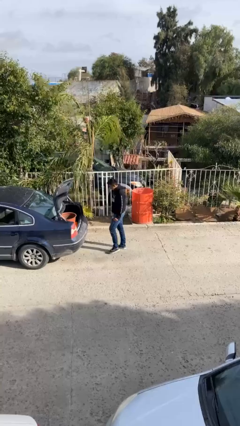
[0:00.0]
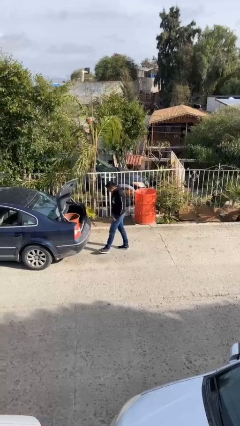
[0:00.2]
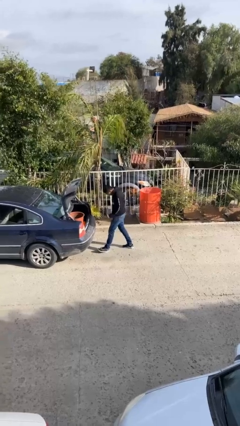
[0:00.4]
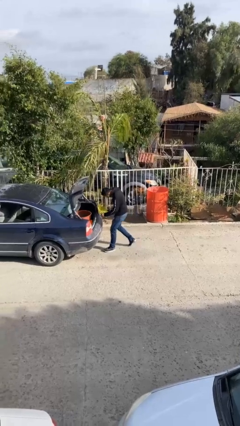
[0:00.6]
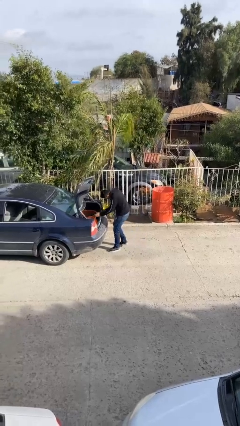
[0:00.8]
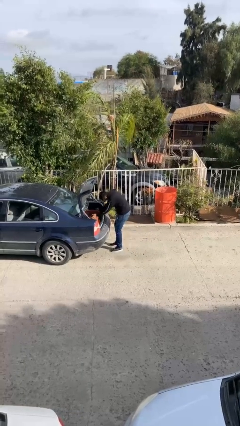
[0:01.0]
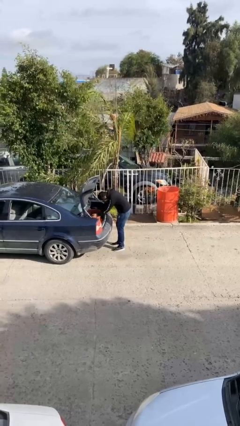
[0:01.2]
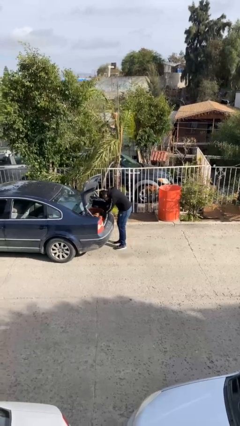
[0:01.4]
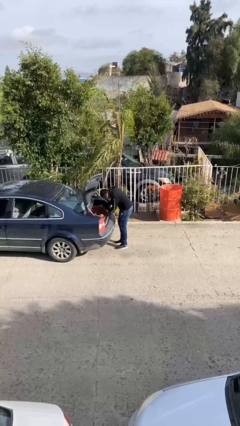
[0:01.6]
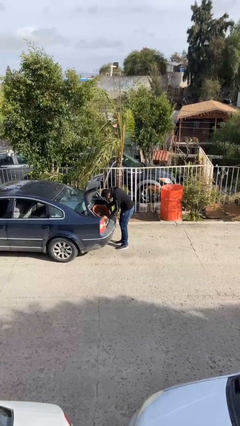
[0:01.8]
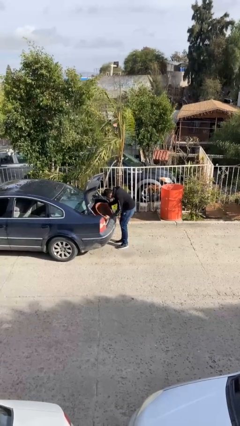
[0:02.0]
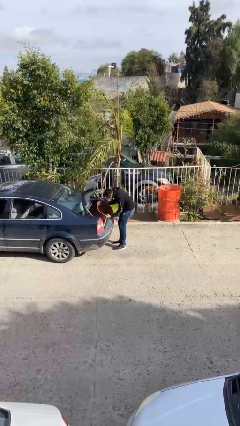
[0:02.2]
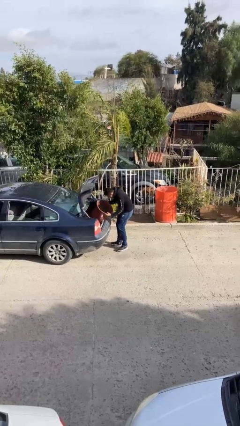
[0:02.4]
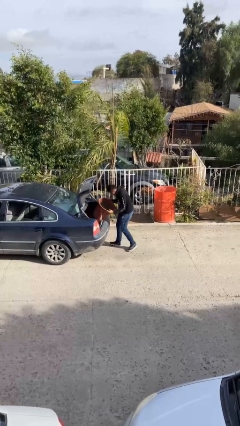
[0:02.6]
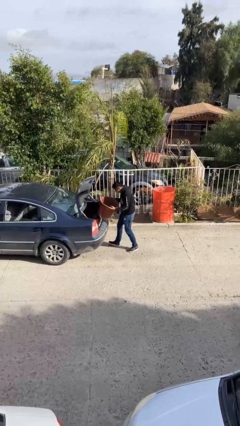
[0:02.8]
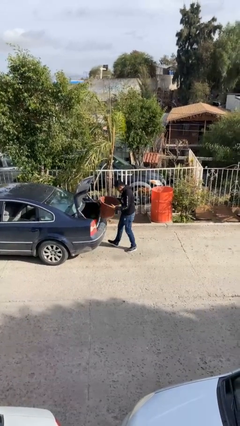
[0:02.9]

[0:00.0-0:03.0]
person unloads car

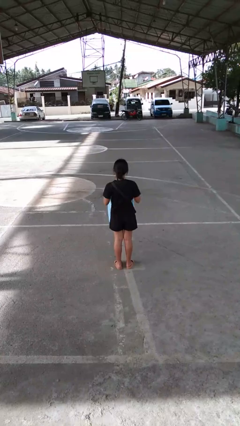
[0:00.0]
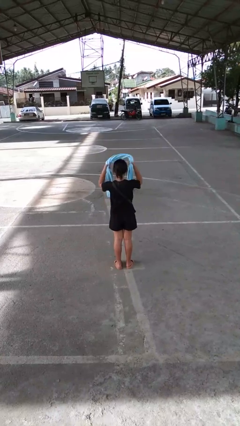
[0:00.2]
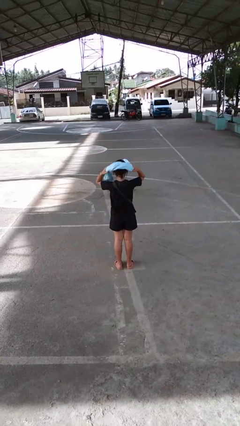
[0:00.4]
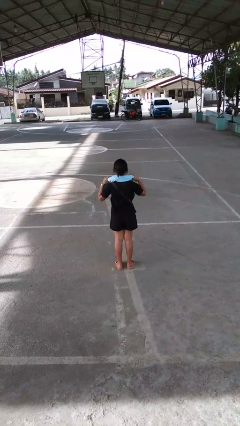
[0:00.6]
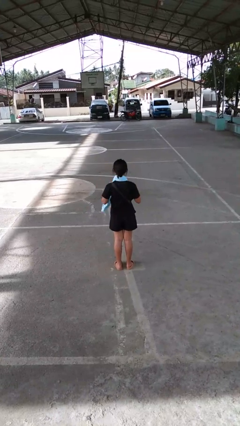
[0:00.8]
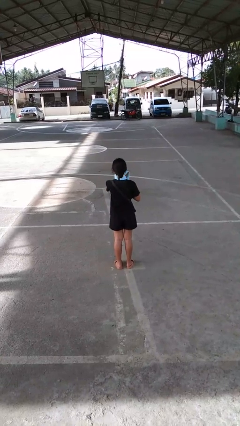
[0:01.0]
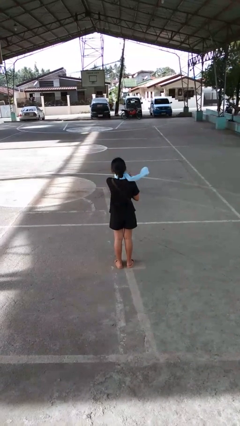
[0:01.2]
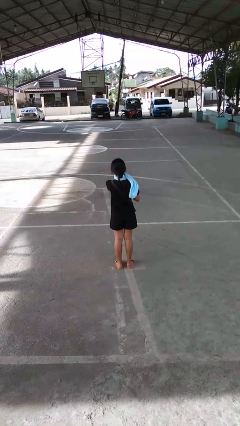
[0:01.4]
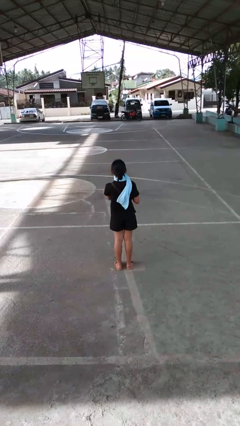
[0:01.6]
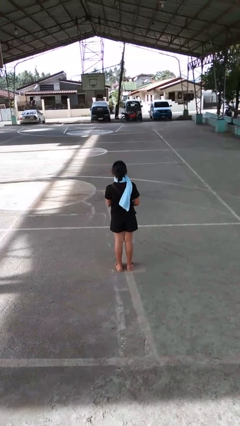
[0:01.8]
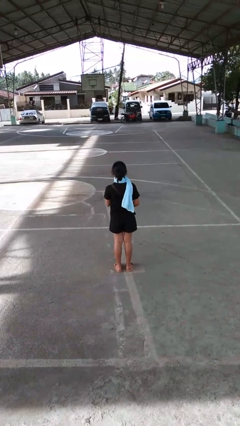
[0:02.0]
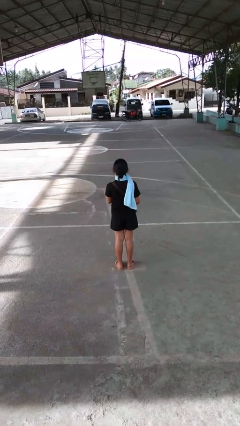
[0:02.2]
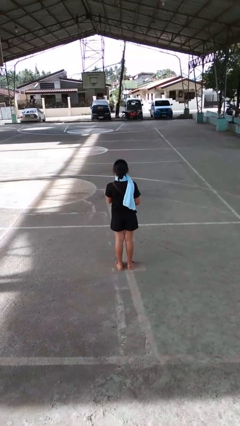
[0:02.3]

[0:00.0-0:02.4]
person puts on scarf

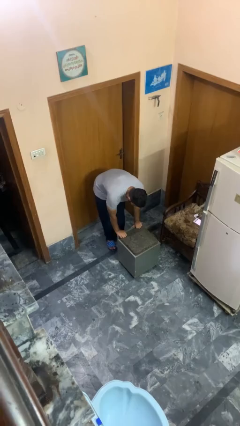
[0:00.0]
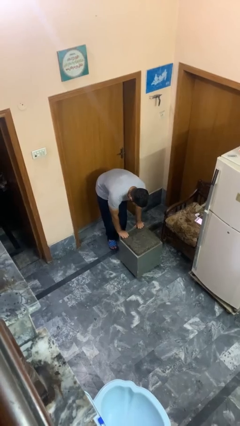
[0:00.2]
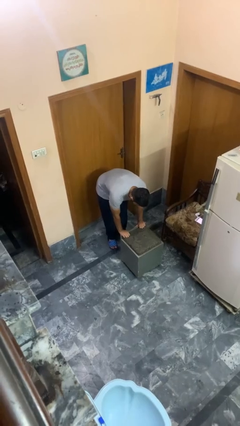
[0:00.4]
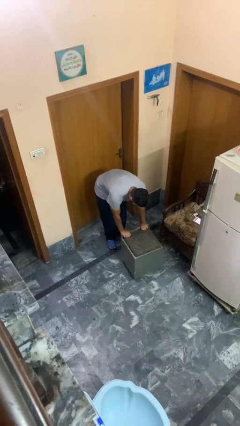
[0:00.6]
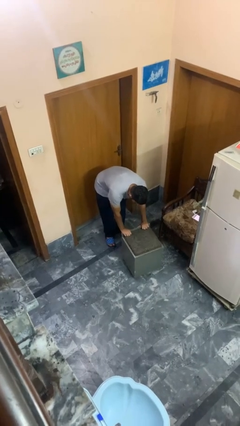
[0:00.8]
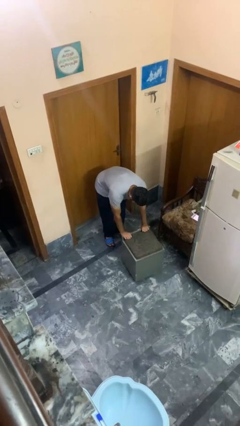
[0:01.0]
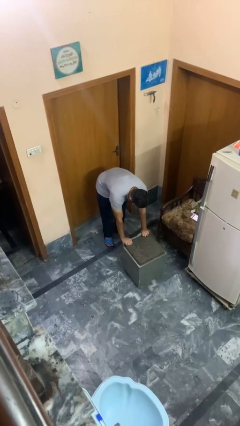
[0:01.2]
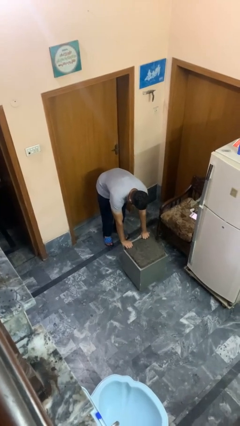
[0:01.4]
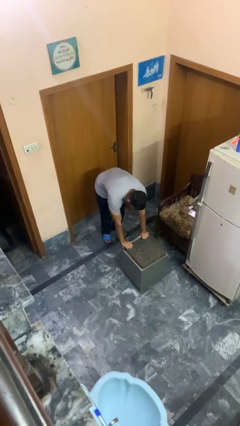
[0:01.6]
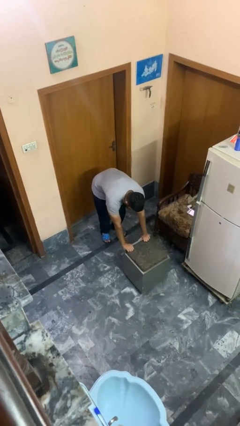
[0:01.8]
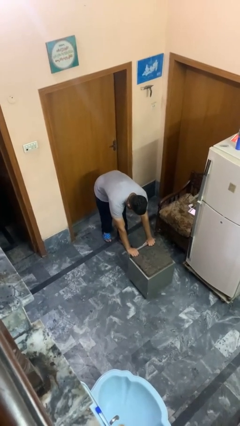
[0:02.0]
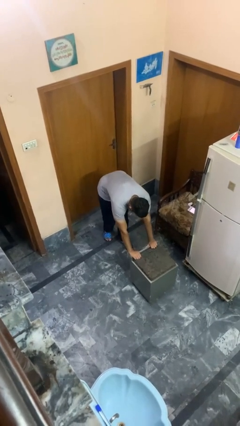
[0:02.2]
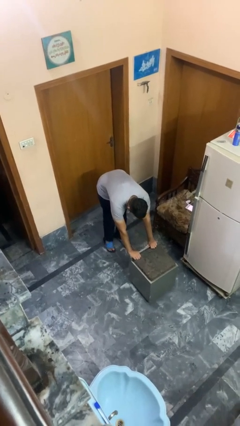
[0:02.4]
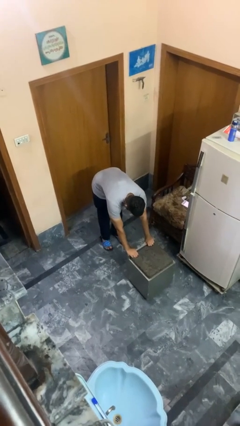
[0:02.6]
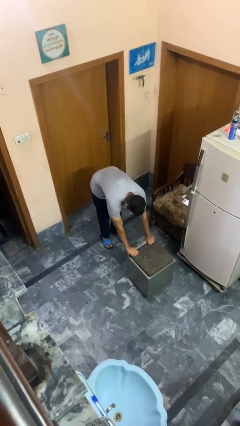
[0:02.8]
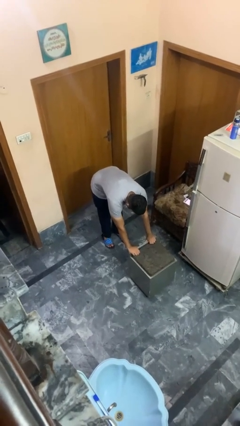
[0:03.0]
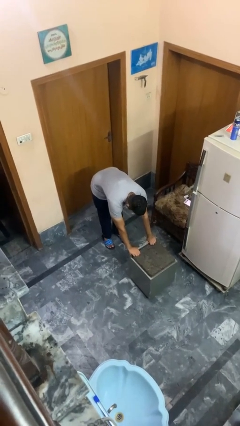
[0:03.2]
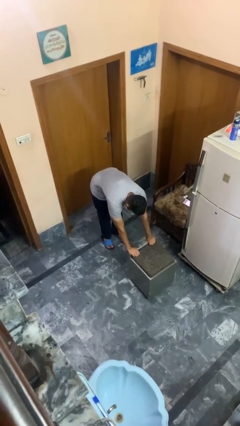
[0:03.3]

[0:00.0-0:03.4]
person pushes wheeled cart

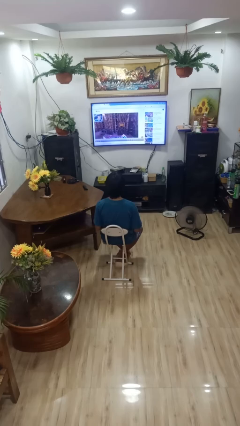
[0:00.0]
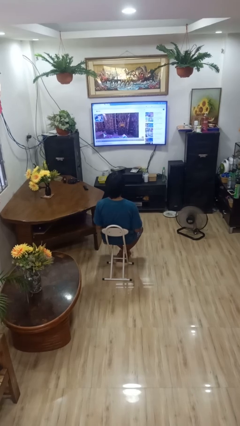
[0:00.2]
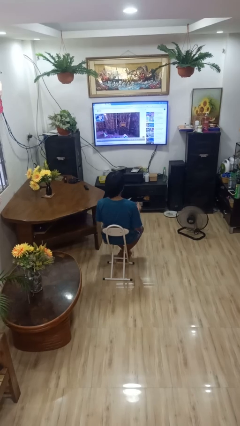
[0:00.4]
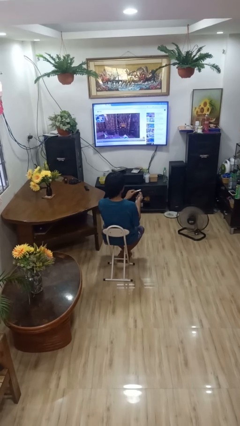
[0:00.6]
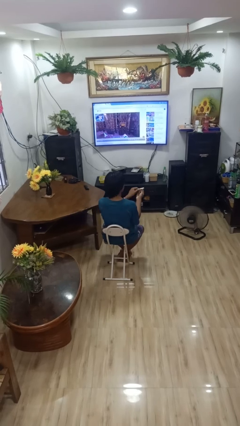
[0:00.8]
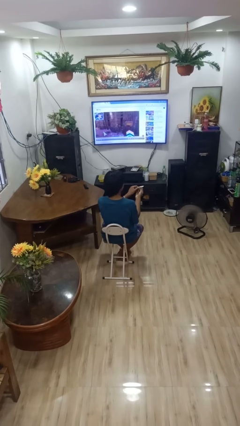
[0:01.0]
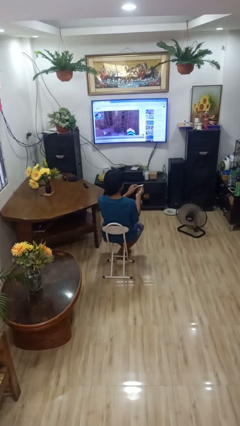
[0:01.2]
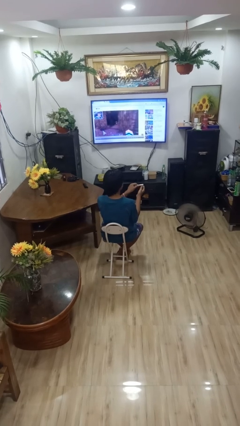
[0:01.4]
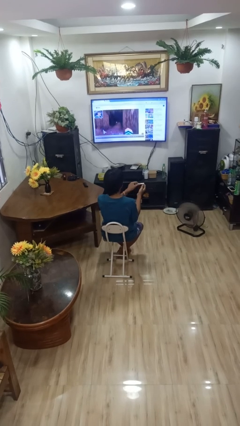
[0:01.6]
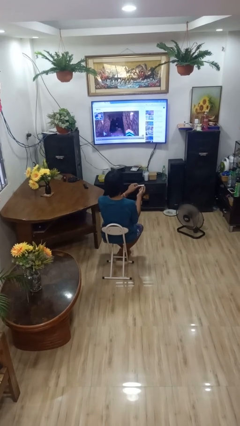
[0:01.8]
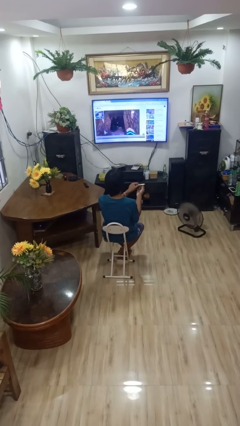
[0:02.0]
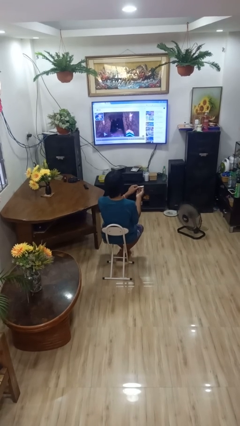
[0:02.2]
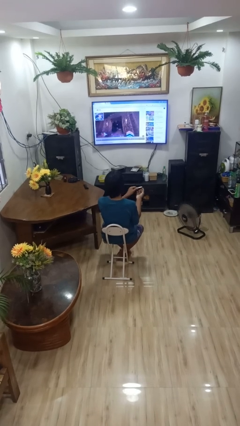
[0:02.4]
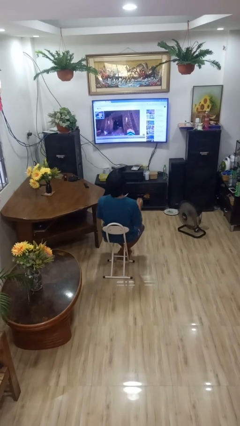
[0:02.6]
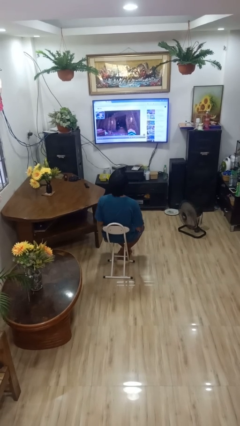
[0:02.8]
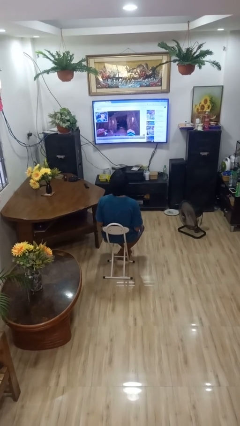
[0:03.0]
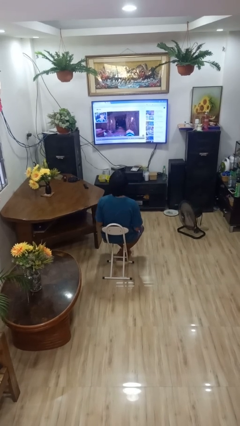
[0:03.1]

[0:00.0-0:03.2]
person files fingernails

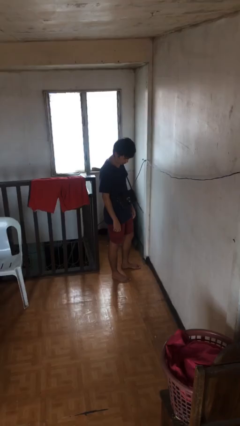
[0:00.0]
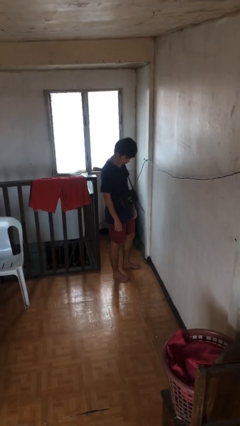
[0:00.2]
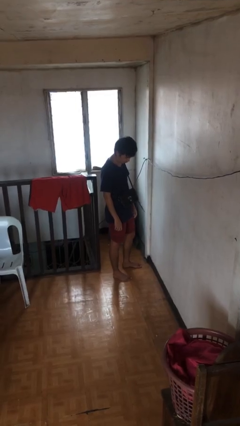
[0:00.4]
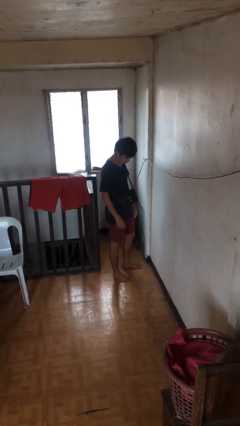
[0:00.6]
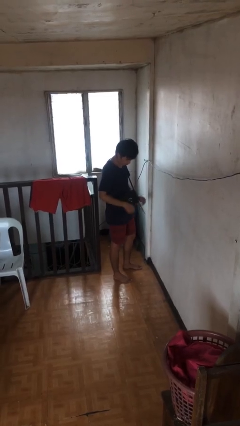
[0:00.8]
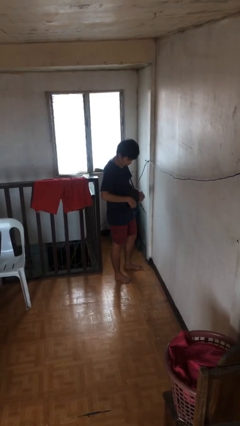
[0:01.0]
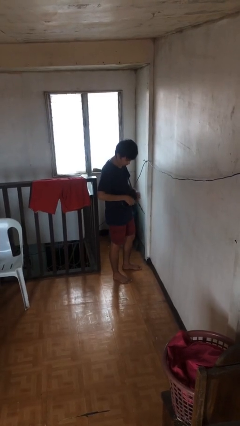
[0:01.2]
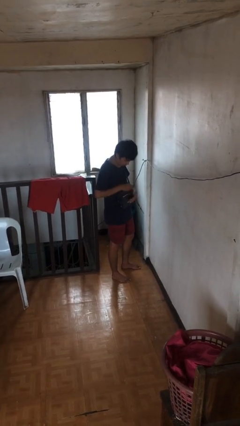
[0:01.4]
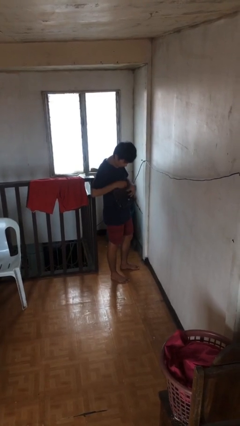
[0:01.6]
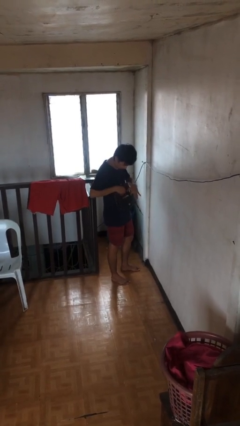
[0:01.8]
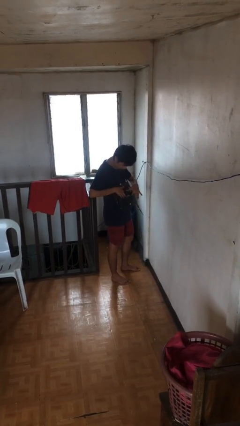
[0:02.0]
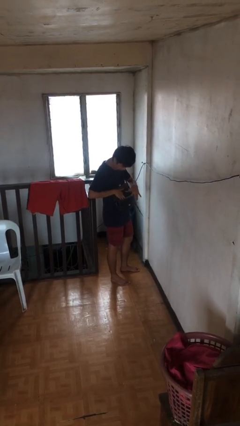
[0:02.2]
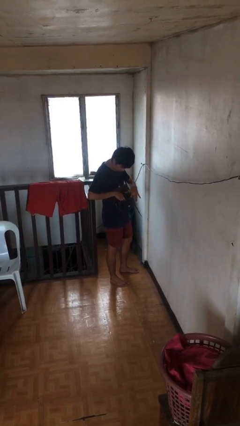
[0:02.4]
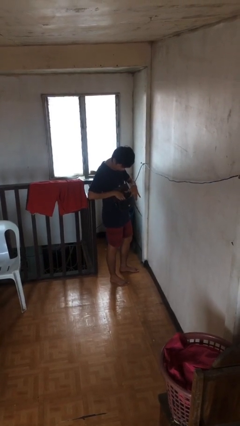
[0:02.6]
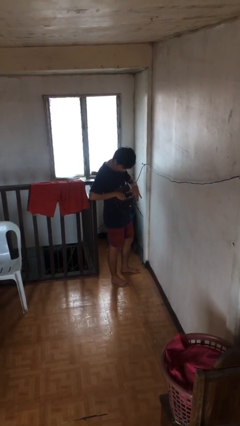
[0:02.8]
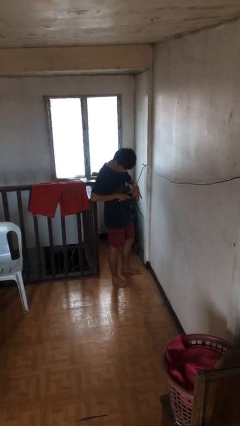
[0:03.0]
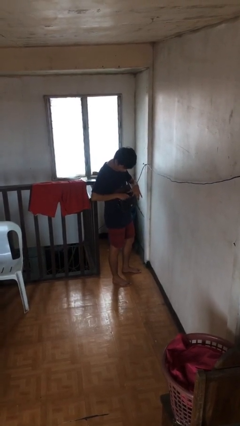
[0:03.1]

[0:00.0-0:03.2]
person searches in purse

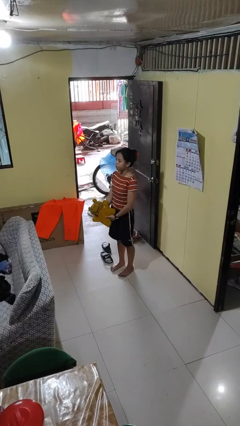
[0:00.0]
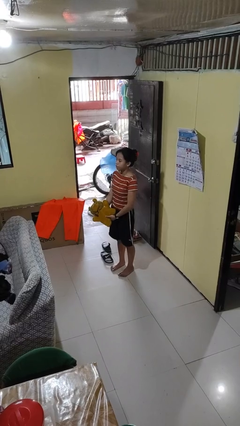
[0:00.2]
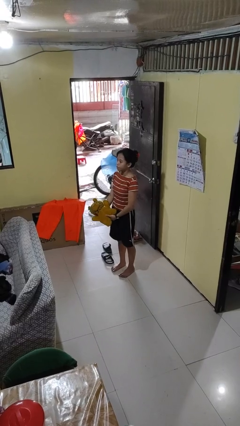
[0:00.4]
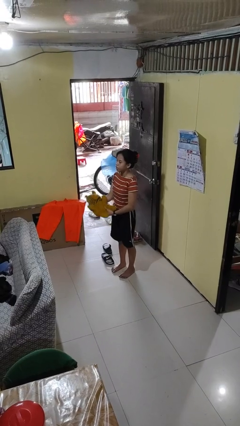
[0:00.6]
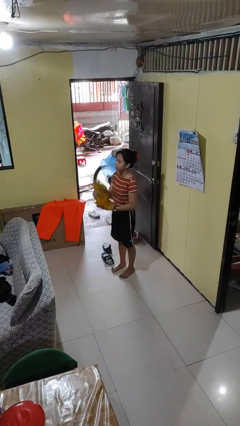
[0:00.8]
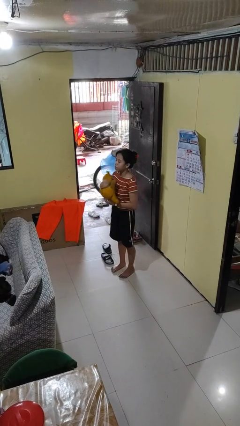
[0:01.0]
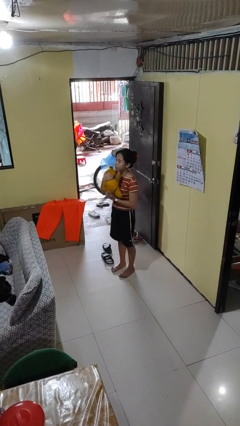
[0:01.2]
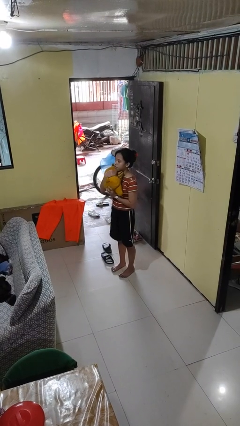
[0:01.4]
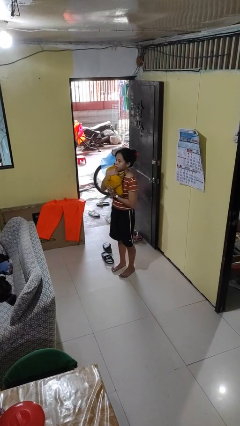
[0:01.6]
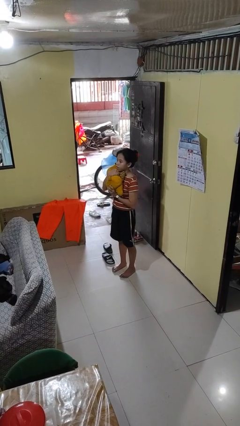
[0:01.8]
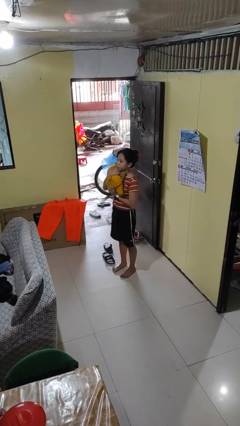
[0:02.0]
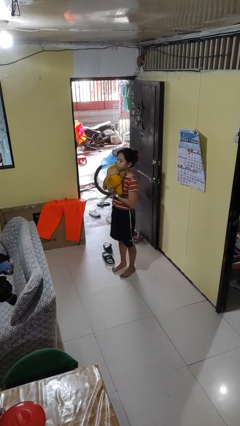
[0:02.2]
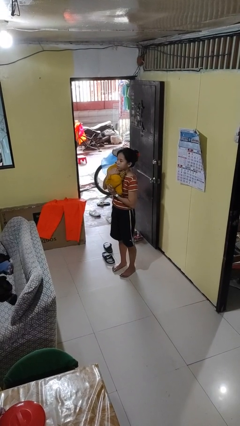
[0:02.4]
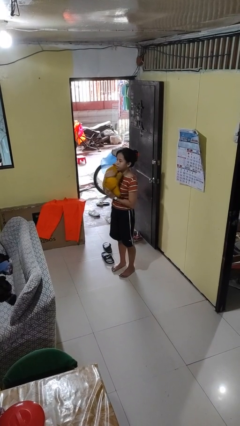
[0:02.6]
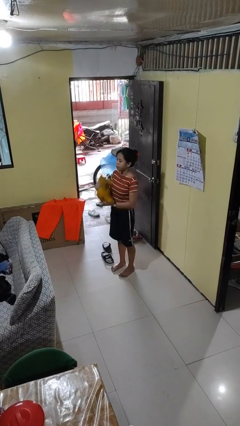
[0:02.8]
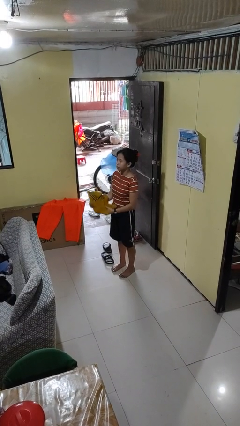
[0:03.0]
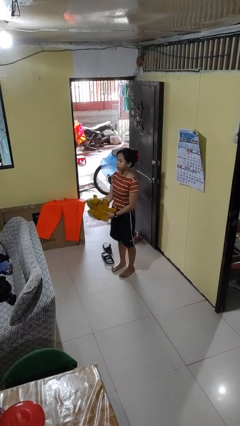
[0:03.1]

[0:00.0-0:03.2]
person hugs stuffed animal
